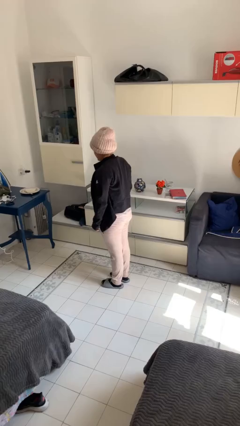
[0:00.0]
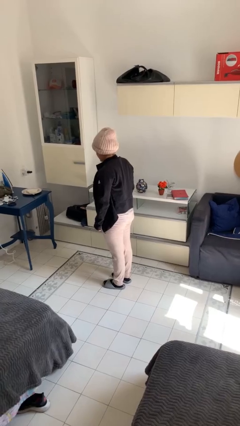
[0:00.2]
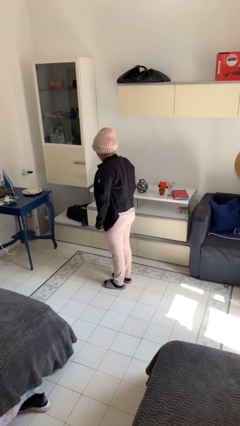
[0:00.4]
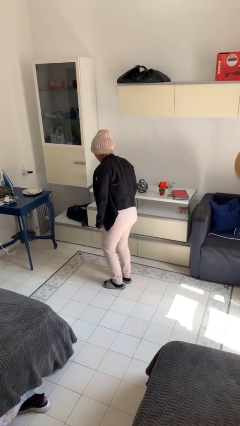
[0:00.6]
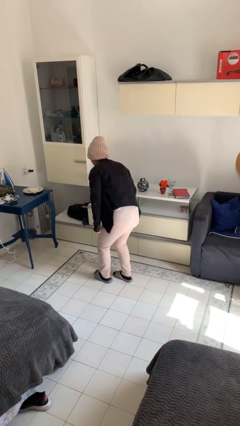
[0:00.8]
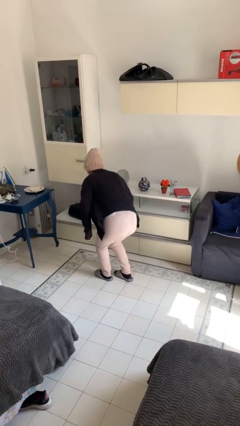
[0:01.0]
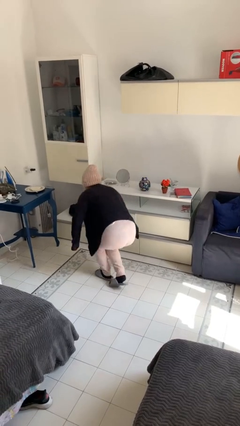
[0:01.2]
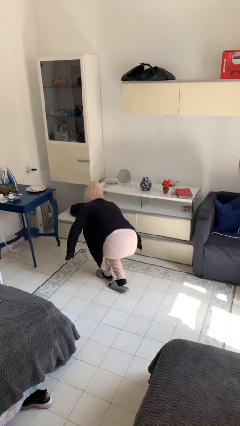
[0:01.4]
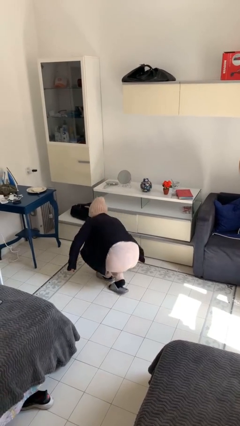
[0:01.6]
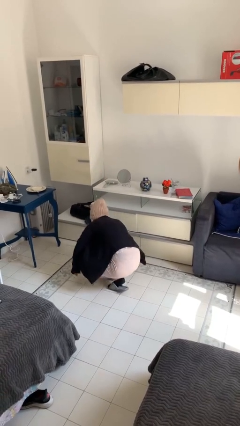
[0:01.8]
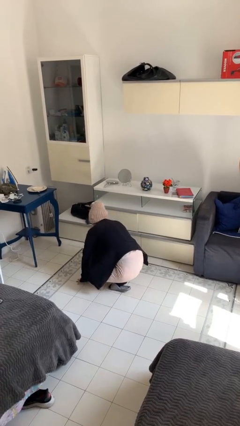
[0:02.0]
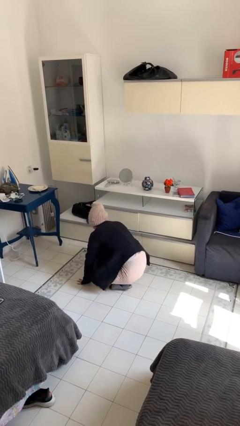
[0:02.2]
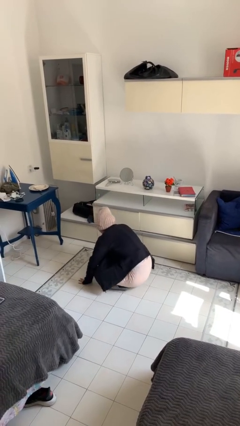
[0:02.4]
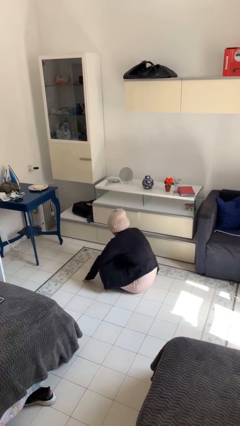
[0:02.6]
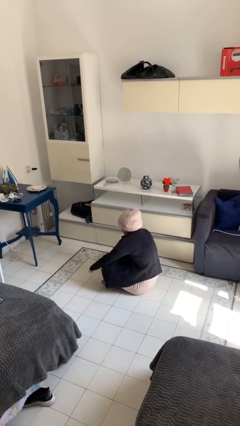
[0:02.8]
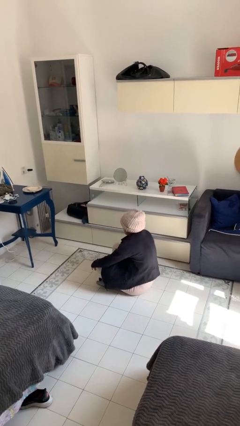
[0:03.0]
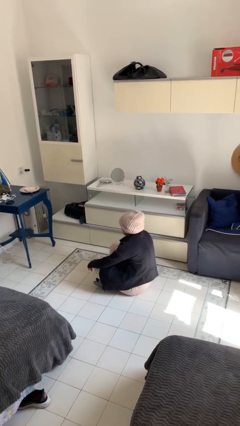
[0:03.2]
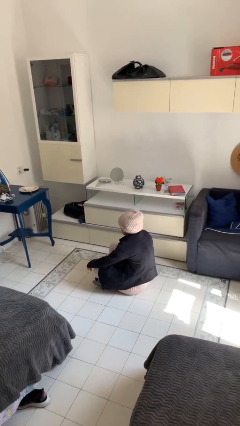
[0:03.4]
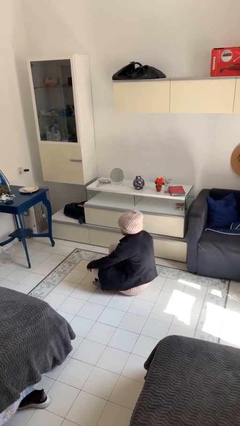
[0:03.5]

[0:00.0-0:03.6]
person sits crisscross

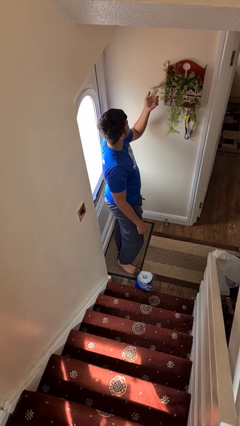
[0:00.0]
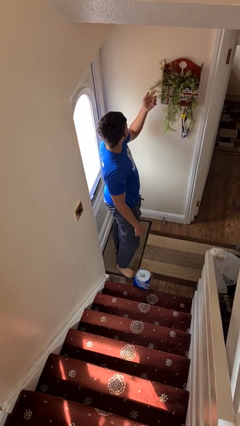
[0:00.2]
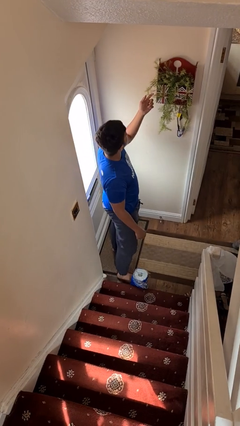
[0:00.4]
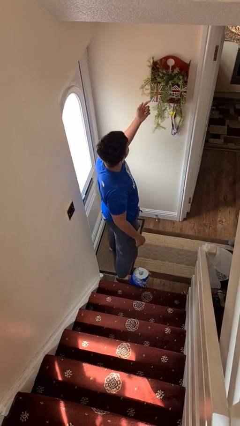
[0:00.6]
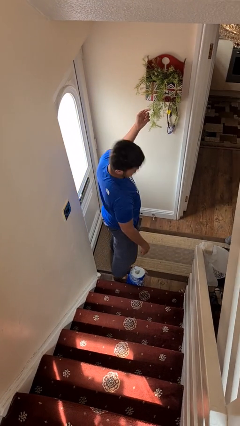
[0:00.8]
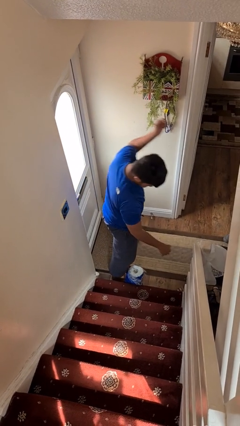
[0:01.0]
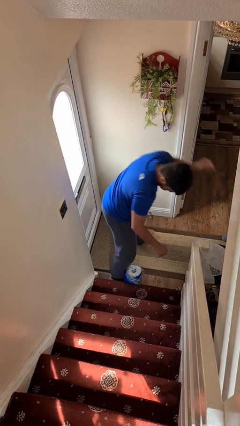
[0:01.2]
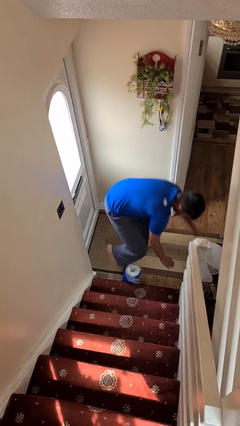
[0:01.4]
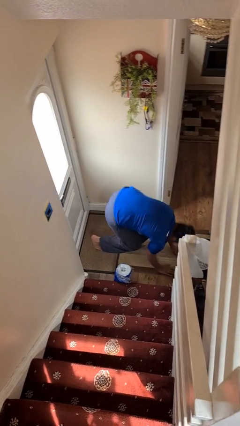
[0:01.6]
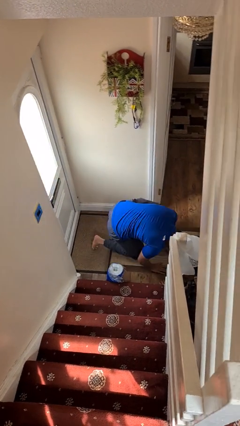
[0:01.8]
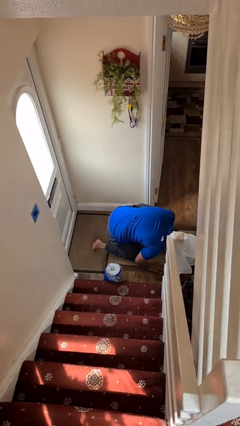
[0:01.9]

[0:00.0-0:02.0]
person trips on object on floor

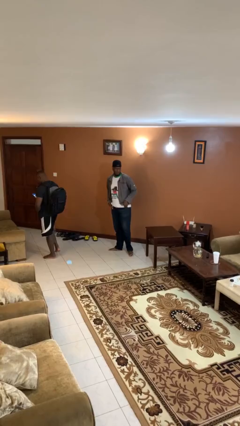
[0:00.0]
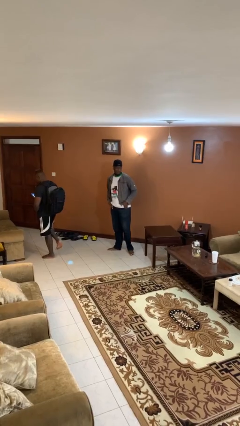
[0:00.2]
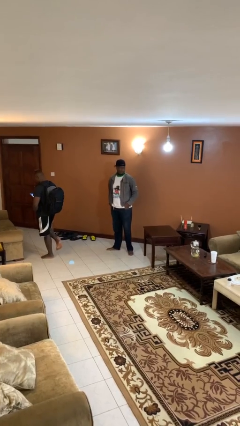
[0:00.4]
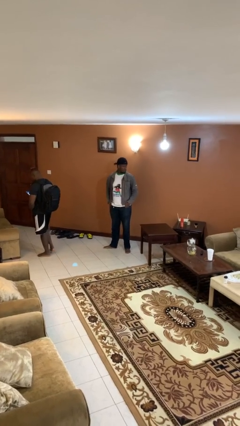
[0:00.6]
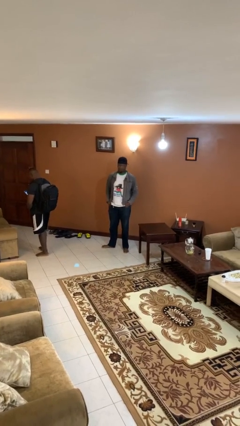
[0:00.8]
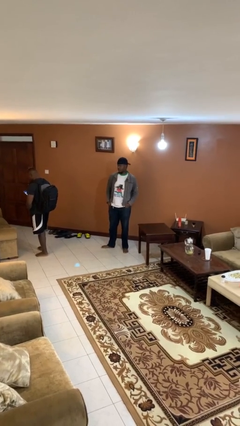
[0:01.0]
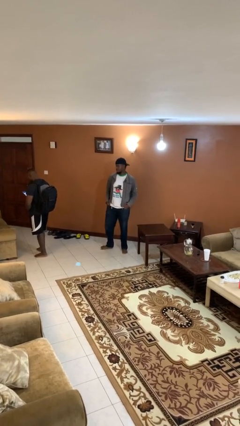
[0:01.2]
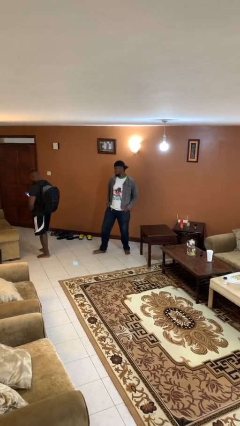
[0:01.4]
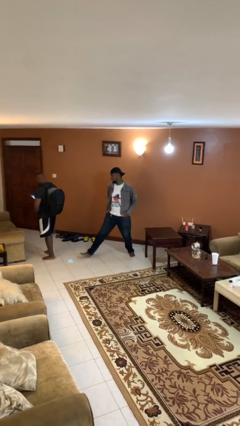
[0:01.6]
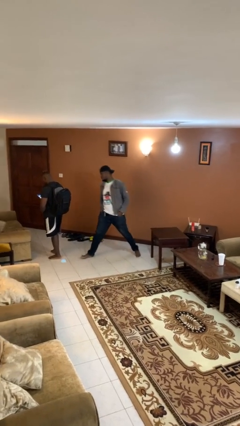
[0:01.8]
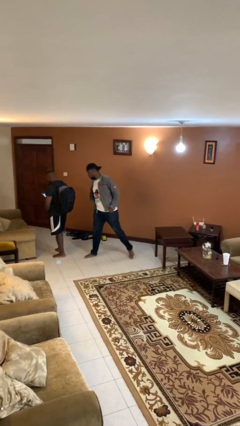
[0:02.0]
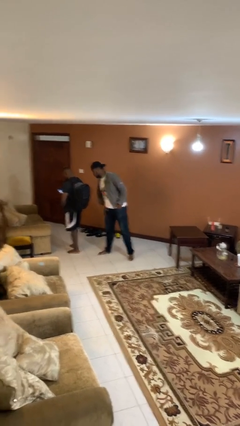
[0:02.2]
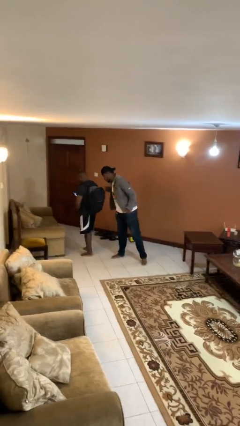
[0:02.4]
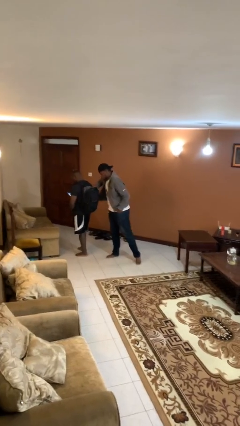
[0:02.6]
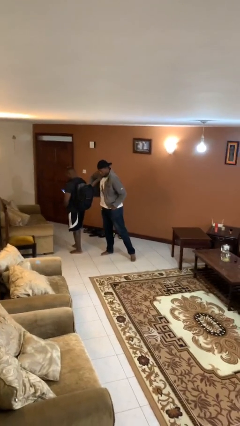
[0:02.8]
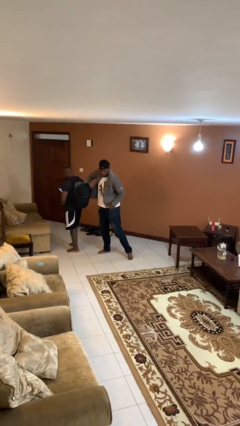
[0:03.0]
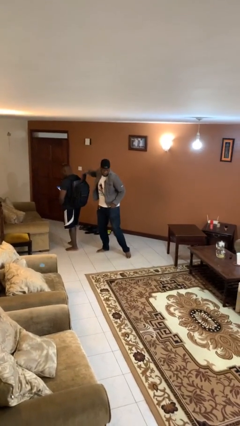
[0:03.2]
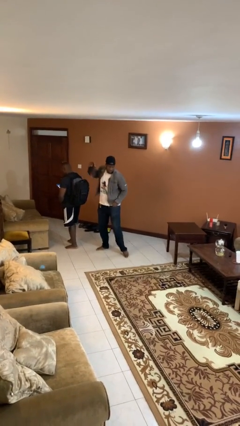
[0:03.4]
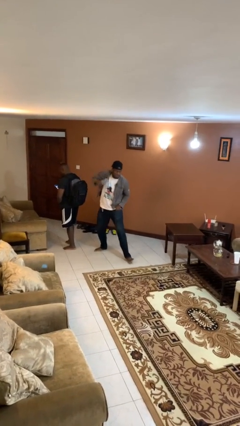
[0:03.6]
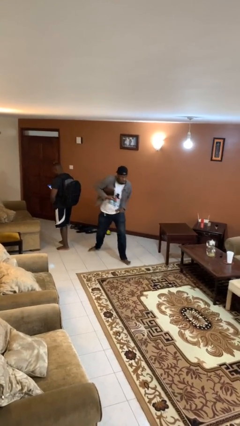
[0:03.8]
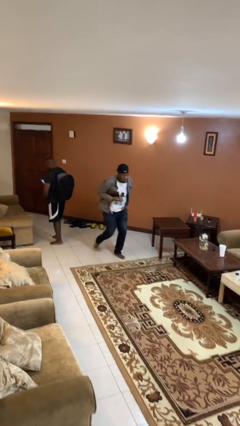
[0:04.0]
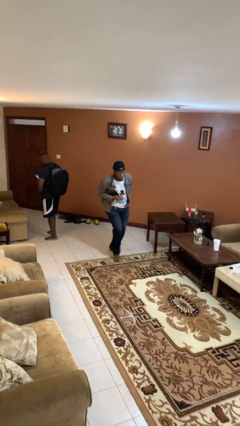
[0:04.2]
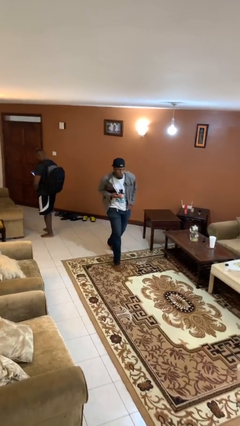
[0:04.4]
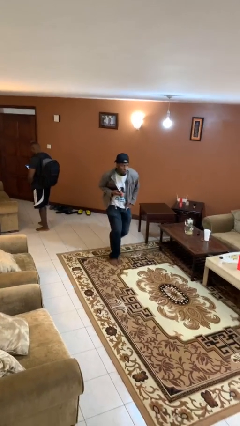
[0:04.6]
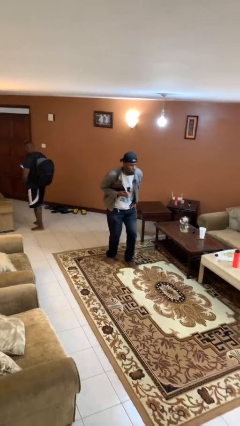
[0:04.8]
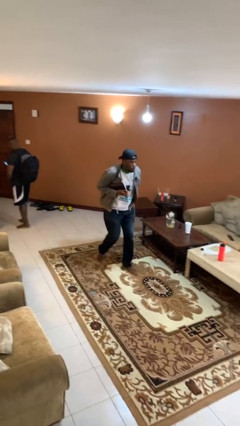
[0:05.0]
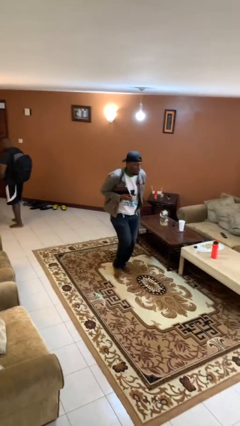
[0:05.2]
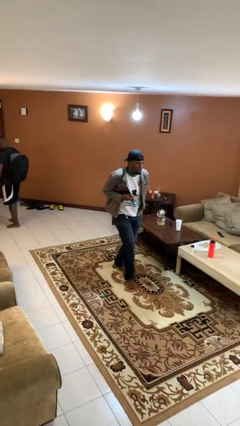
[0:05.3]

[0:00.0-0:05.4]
person steals object from person

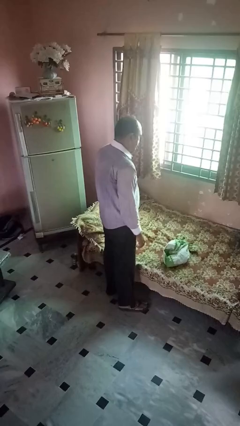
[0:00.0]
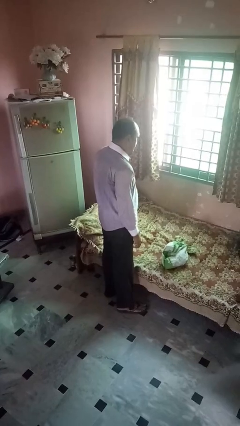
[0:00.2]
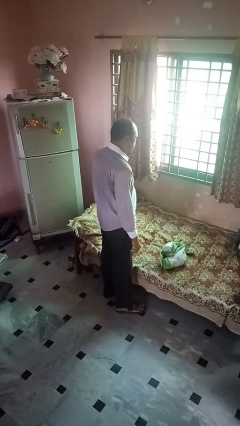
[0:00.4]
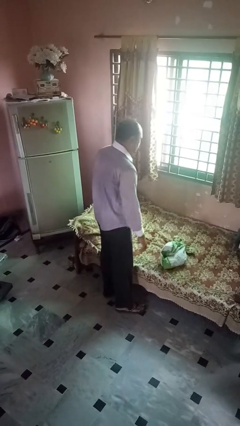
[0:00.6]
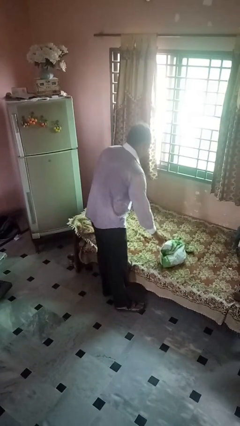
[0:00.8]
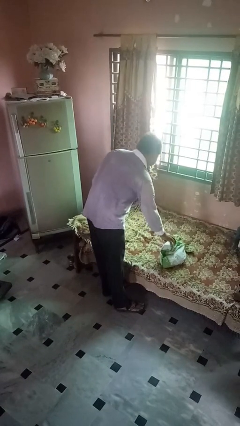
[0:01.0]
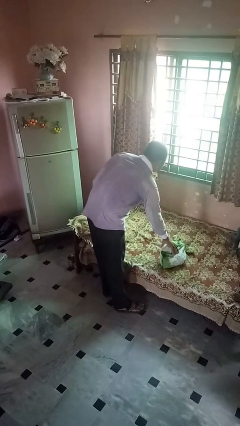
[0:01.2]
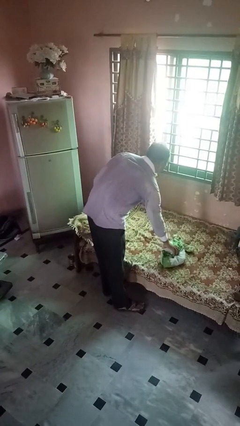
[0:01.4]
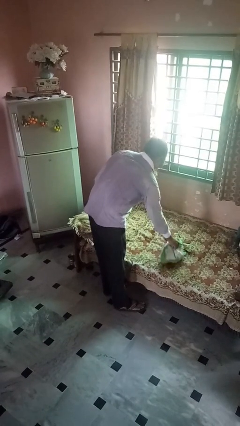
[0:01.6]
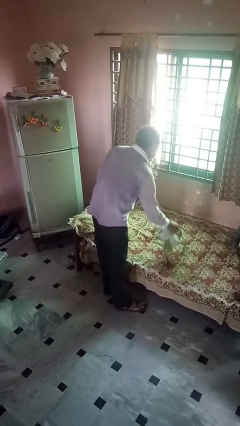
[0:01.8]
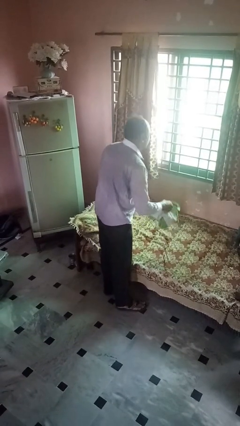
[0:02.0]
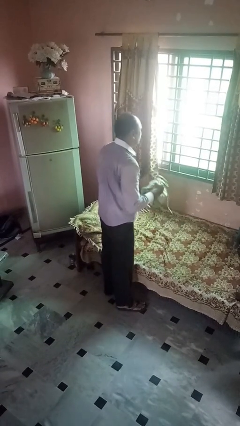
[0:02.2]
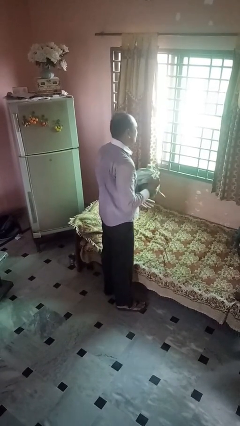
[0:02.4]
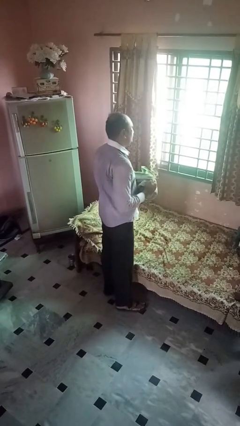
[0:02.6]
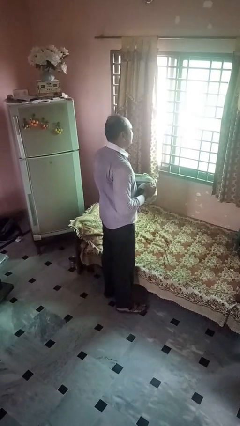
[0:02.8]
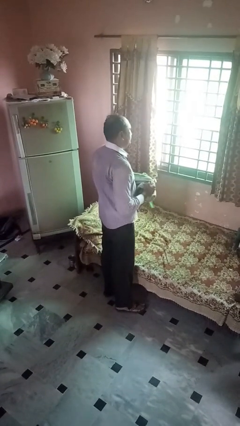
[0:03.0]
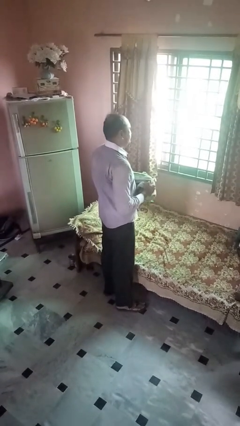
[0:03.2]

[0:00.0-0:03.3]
person picks up object from bed

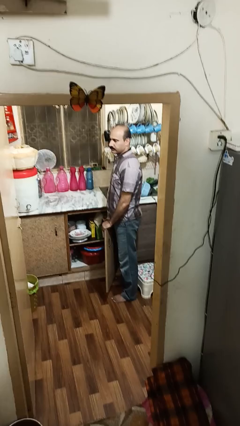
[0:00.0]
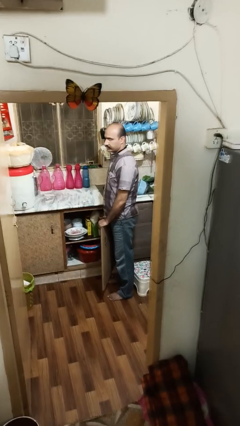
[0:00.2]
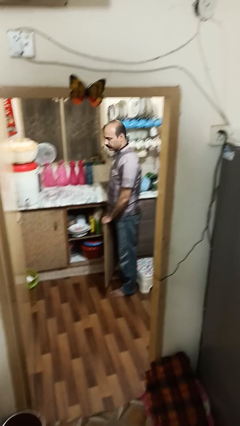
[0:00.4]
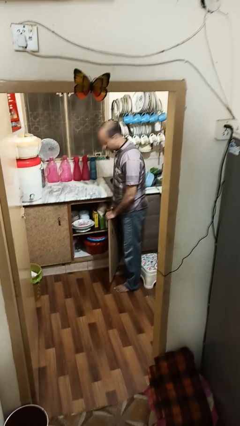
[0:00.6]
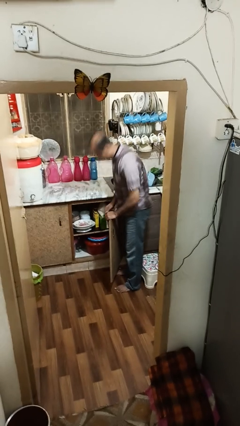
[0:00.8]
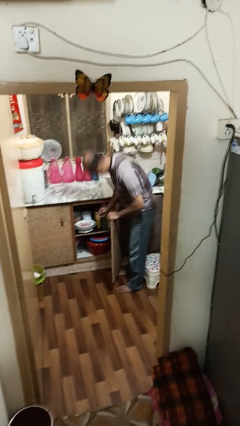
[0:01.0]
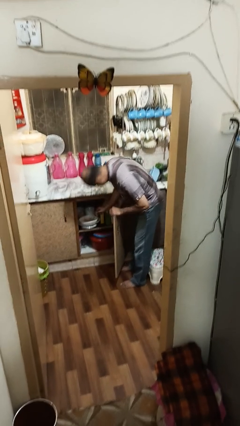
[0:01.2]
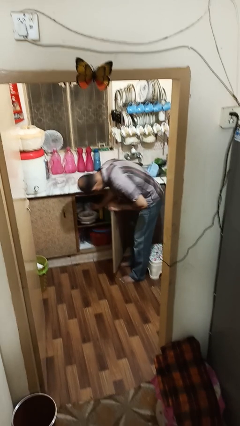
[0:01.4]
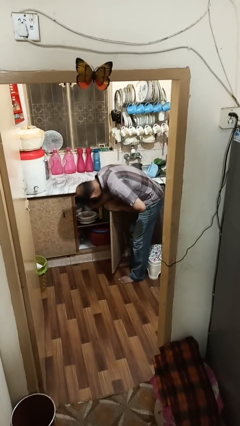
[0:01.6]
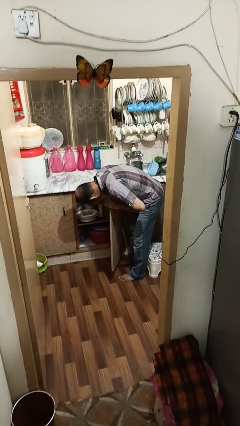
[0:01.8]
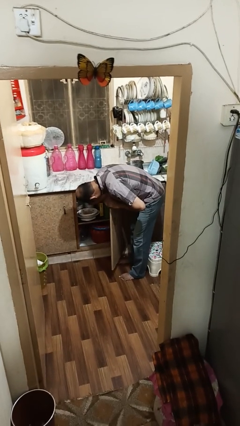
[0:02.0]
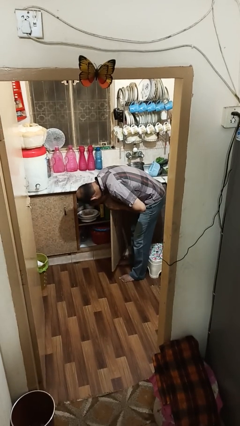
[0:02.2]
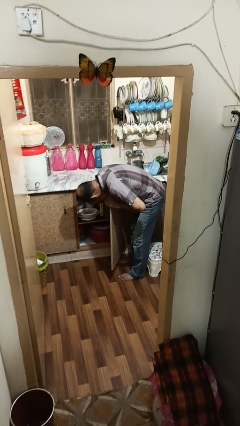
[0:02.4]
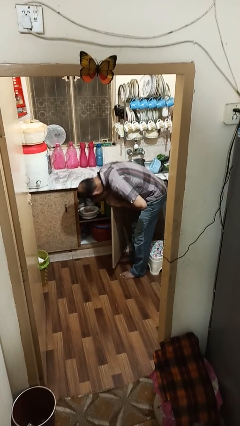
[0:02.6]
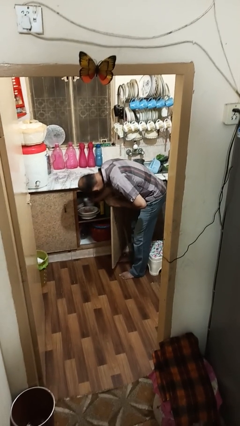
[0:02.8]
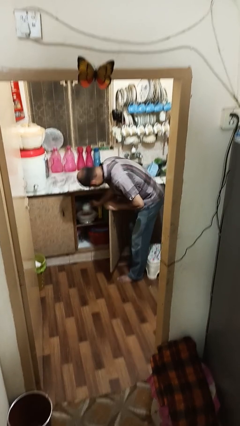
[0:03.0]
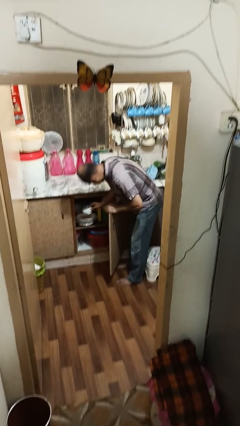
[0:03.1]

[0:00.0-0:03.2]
person takes object from cabinet

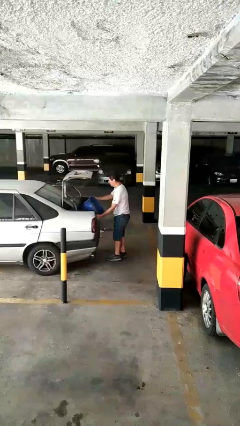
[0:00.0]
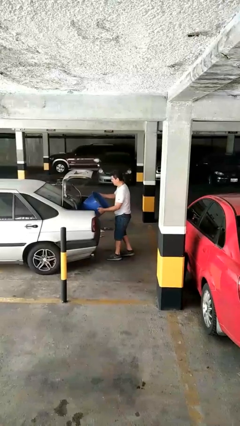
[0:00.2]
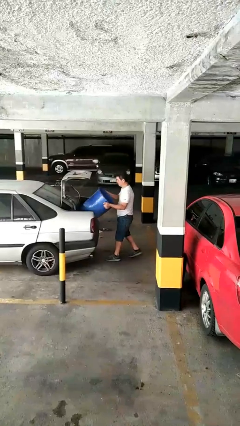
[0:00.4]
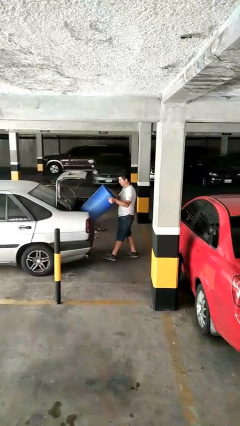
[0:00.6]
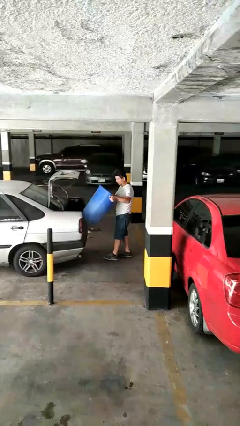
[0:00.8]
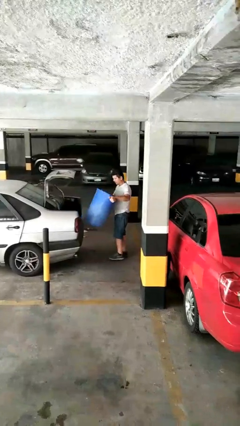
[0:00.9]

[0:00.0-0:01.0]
person unloads car
